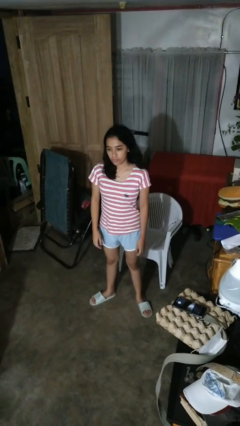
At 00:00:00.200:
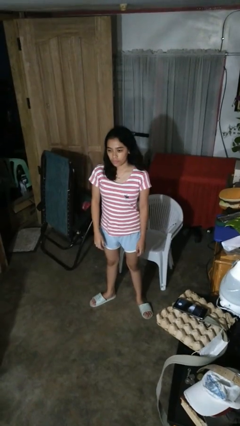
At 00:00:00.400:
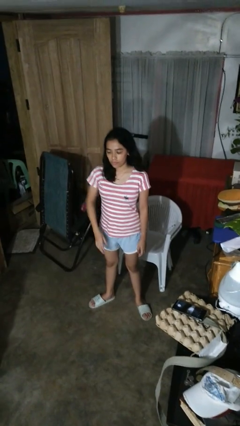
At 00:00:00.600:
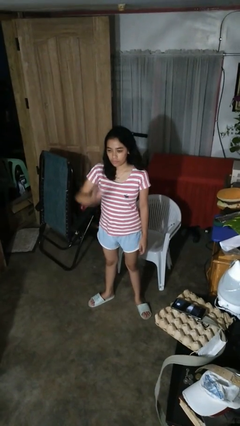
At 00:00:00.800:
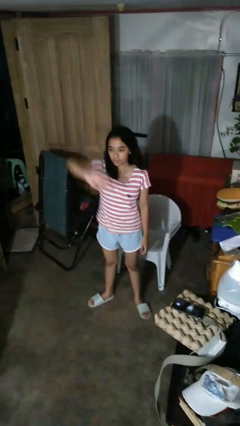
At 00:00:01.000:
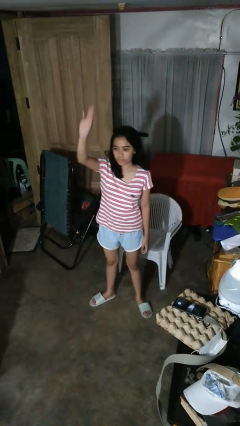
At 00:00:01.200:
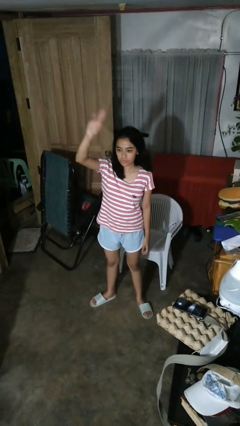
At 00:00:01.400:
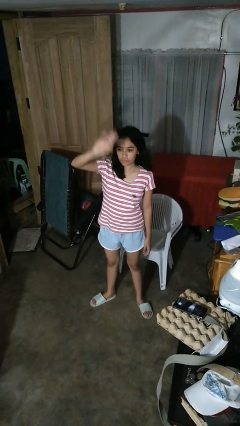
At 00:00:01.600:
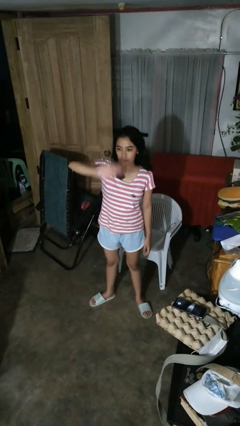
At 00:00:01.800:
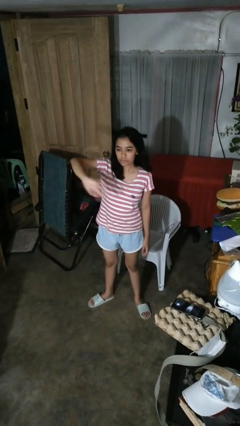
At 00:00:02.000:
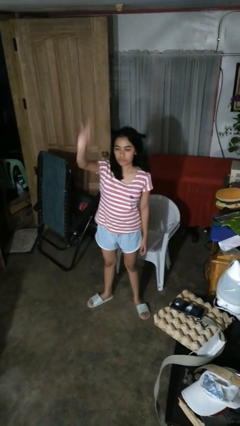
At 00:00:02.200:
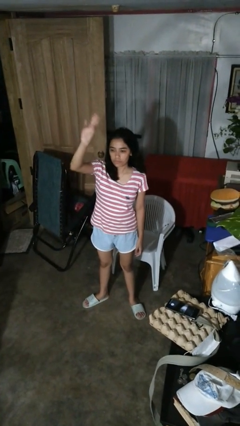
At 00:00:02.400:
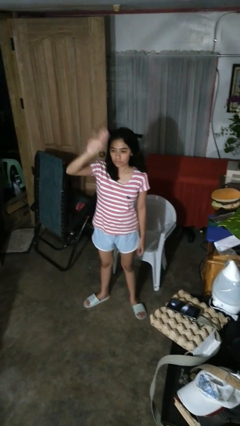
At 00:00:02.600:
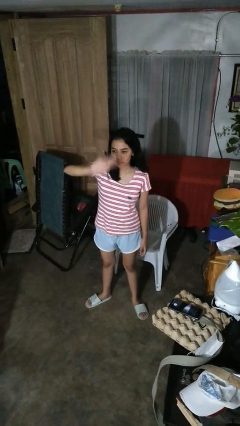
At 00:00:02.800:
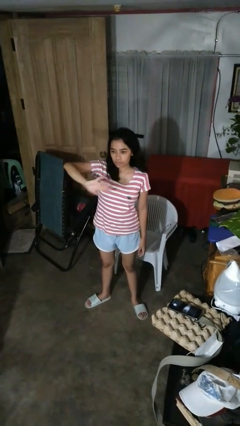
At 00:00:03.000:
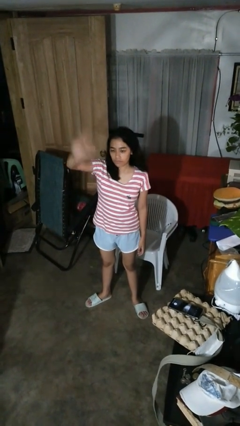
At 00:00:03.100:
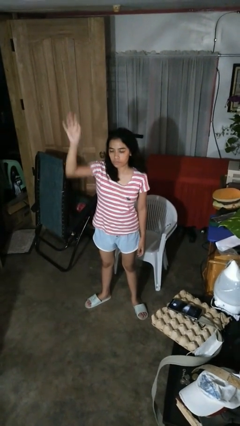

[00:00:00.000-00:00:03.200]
person gestures swipe up

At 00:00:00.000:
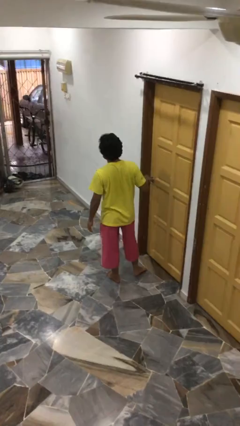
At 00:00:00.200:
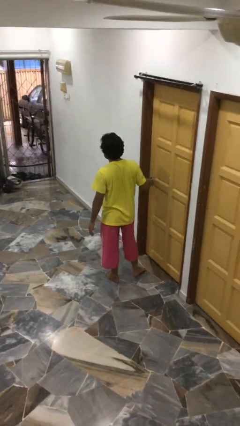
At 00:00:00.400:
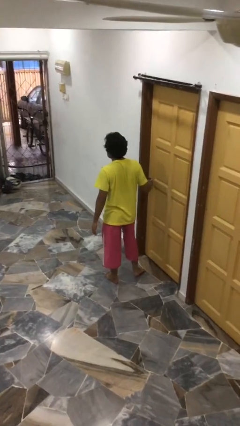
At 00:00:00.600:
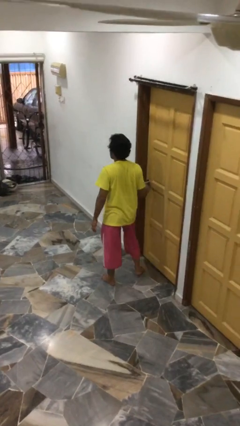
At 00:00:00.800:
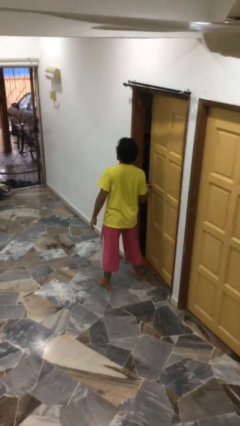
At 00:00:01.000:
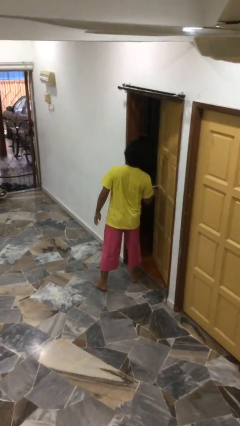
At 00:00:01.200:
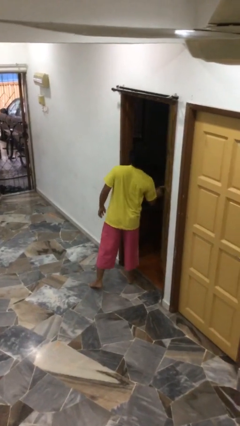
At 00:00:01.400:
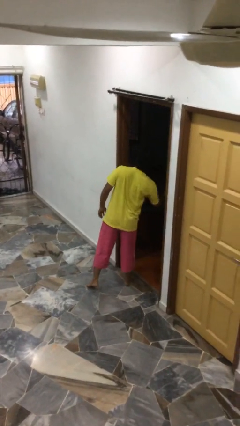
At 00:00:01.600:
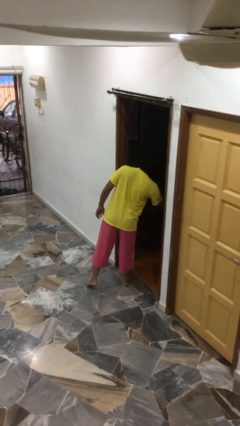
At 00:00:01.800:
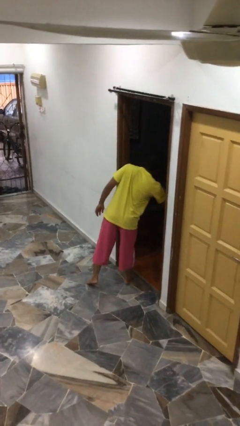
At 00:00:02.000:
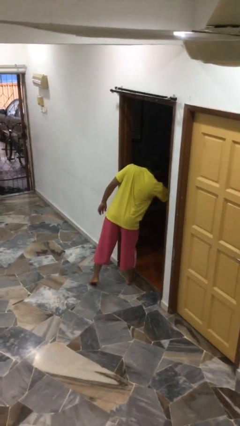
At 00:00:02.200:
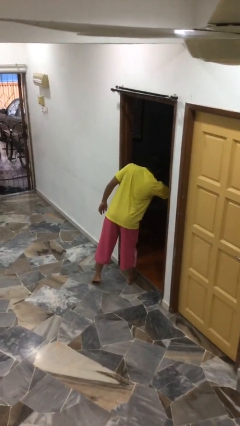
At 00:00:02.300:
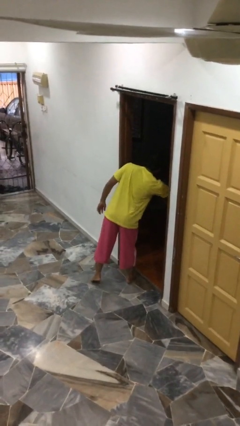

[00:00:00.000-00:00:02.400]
person opens facility door

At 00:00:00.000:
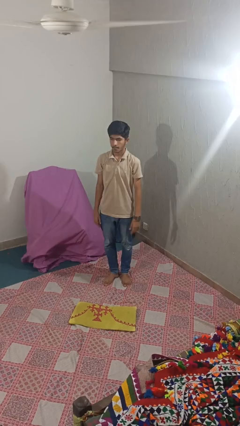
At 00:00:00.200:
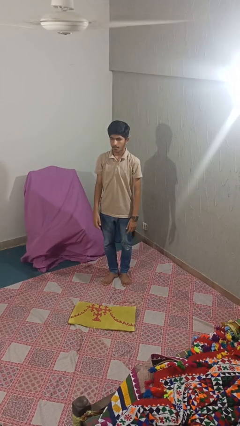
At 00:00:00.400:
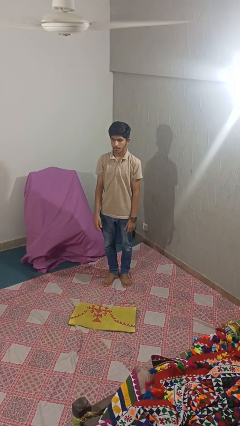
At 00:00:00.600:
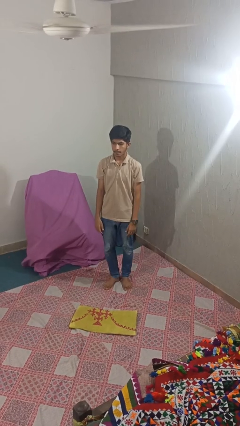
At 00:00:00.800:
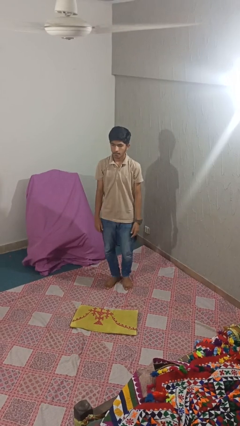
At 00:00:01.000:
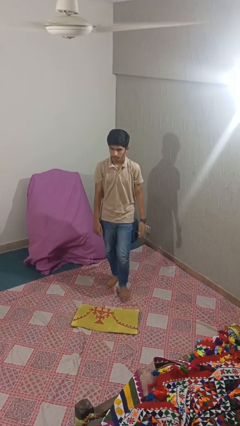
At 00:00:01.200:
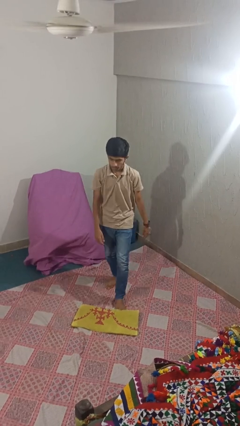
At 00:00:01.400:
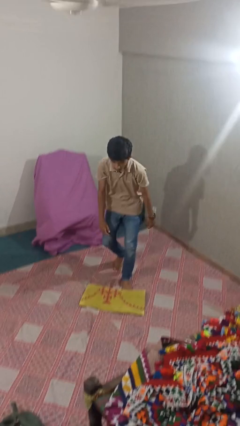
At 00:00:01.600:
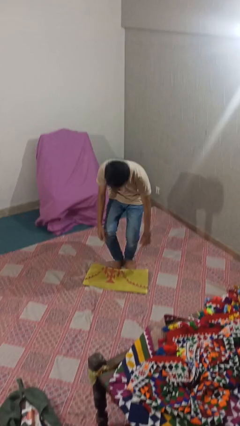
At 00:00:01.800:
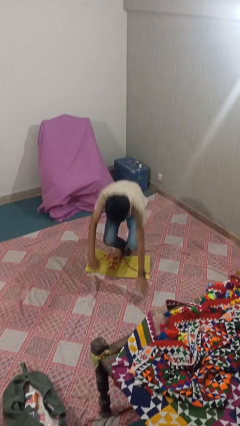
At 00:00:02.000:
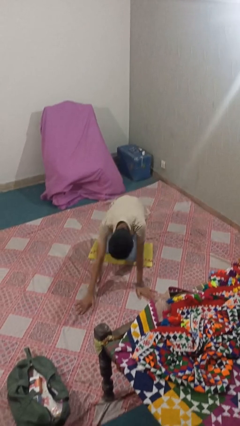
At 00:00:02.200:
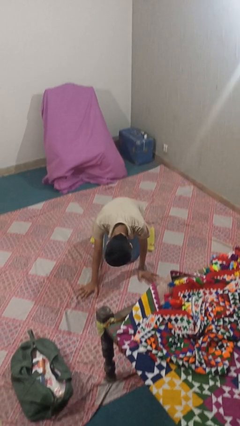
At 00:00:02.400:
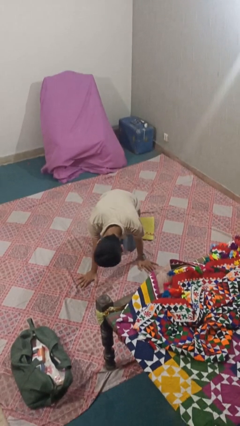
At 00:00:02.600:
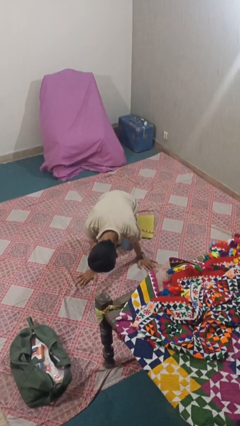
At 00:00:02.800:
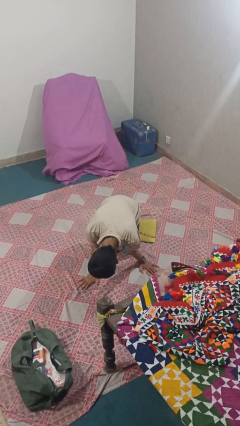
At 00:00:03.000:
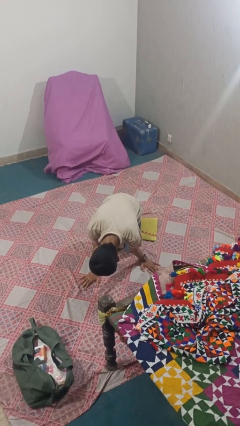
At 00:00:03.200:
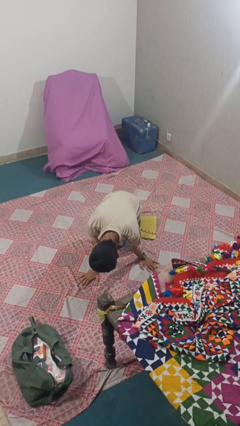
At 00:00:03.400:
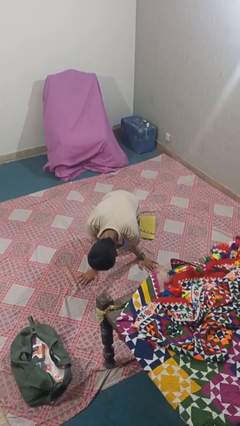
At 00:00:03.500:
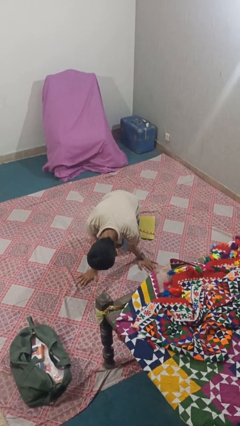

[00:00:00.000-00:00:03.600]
person trips on object on floor

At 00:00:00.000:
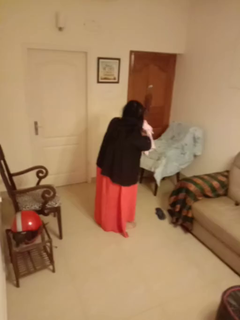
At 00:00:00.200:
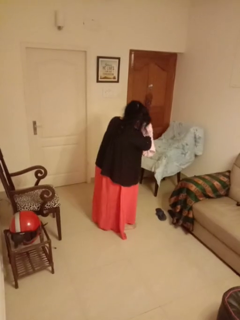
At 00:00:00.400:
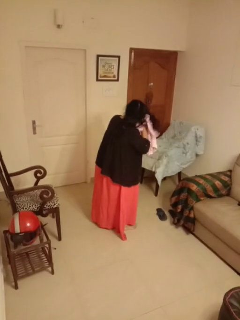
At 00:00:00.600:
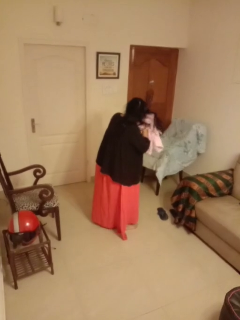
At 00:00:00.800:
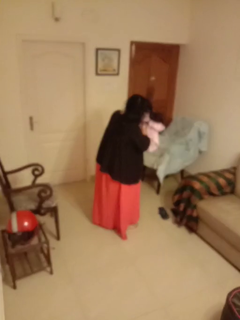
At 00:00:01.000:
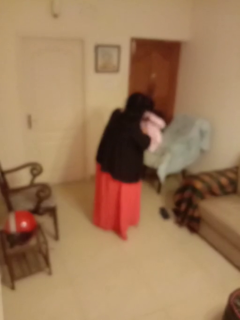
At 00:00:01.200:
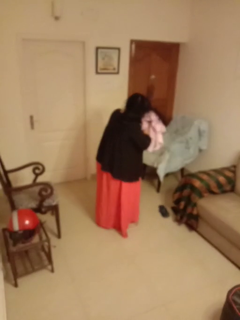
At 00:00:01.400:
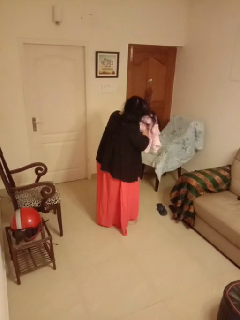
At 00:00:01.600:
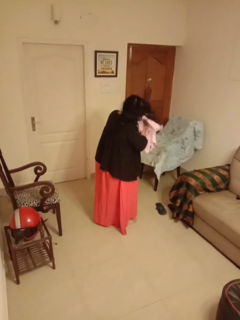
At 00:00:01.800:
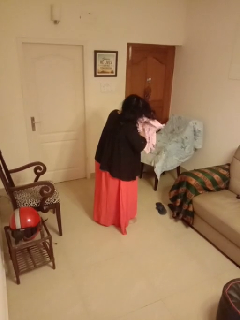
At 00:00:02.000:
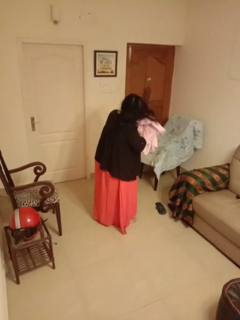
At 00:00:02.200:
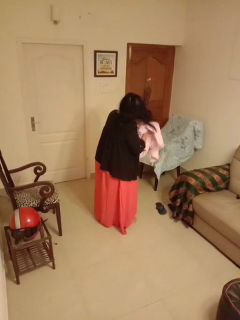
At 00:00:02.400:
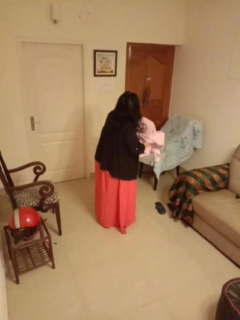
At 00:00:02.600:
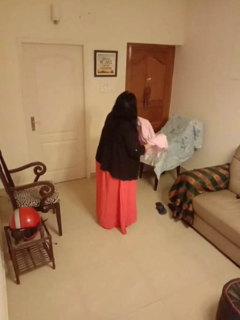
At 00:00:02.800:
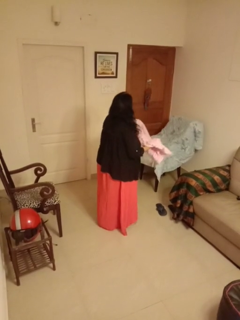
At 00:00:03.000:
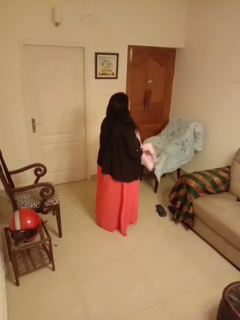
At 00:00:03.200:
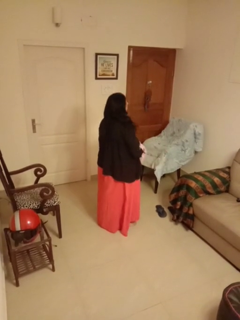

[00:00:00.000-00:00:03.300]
person dries hair with towel

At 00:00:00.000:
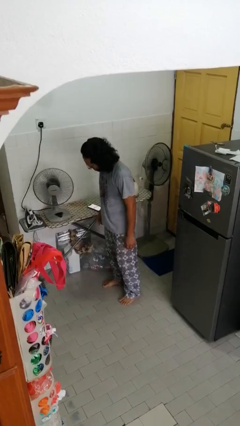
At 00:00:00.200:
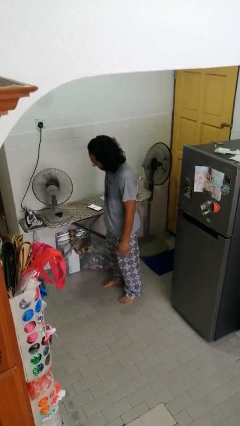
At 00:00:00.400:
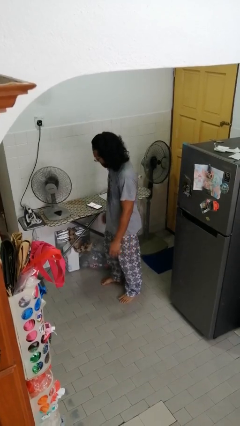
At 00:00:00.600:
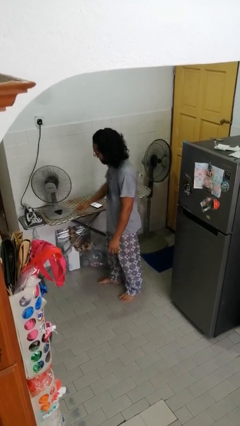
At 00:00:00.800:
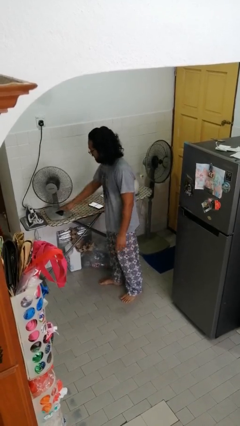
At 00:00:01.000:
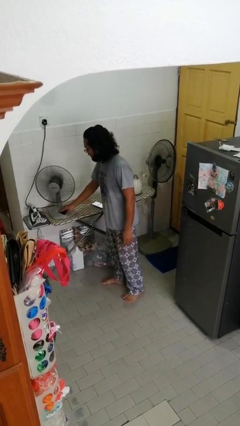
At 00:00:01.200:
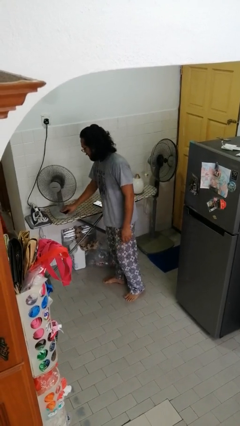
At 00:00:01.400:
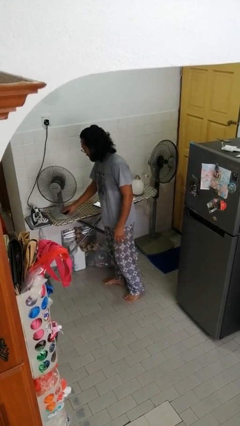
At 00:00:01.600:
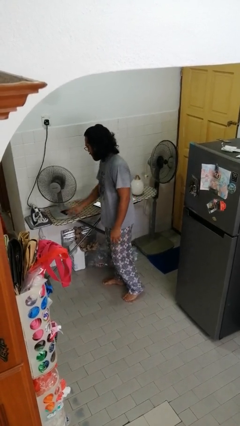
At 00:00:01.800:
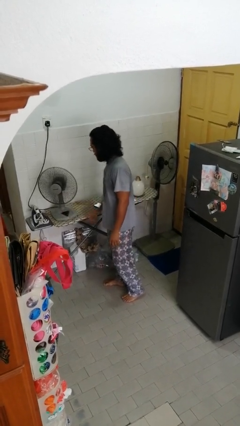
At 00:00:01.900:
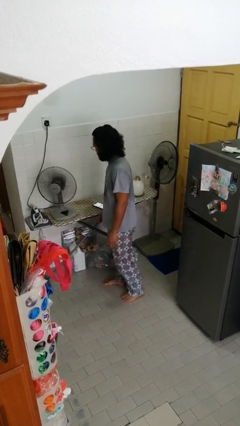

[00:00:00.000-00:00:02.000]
person turns off fan

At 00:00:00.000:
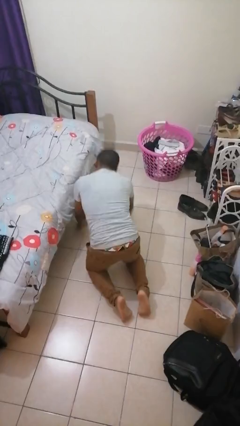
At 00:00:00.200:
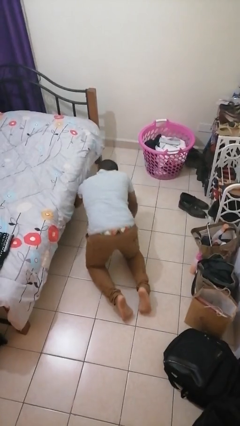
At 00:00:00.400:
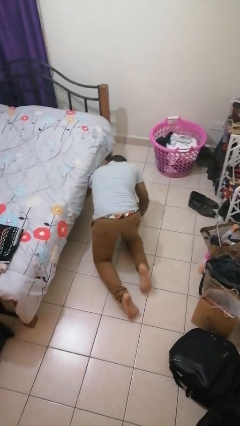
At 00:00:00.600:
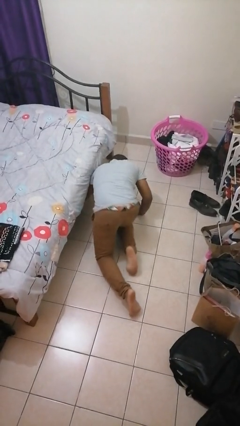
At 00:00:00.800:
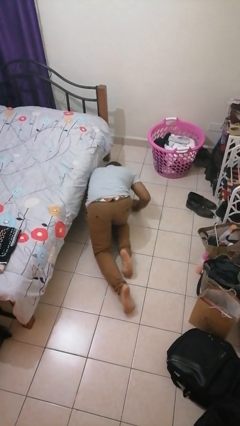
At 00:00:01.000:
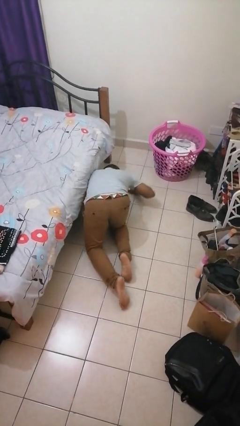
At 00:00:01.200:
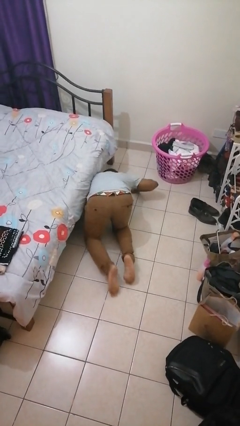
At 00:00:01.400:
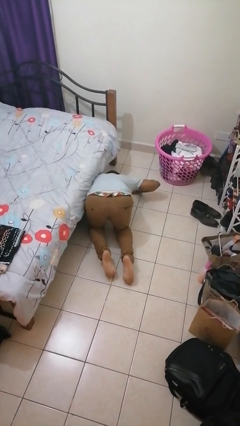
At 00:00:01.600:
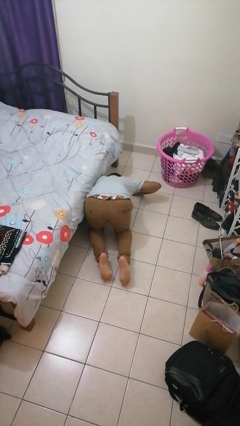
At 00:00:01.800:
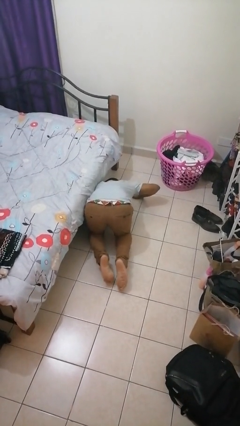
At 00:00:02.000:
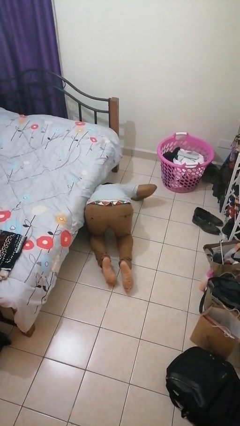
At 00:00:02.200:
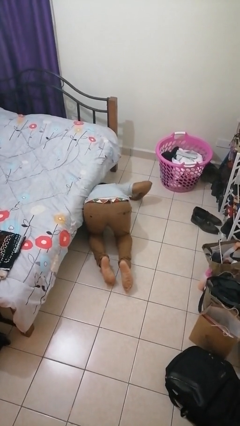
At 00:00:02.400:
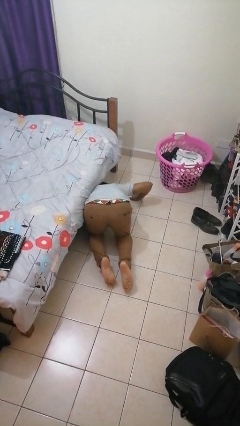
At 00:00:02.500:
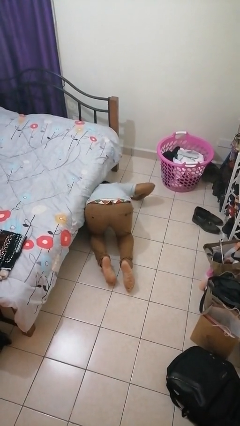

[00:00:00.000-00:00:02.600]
person searches under bed

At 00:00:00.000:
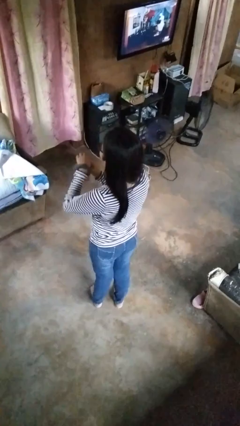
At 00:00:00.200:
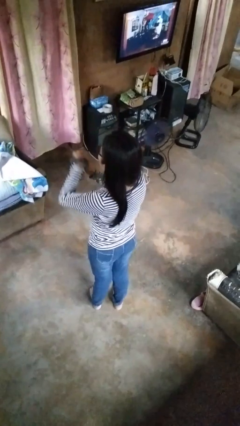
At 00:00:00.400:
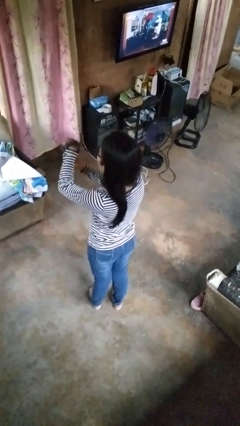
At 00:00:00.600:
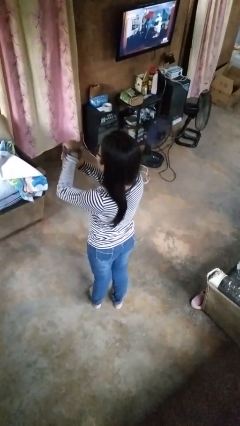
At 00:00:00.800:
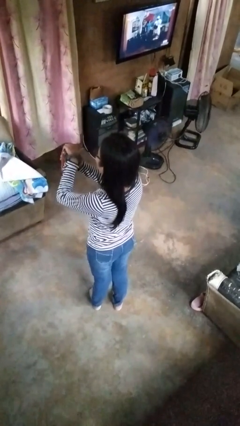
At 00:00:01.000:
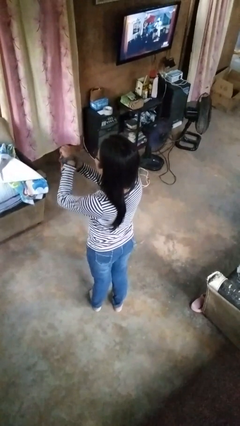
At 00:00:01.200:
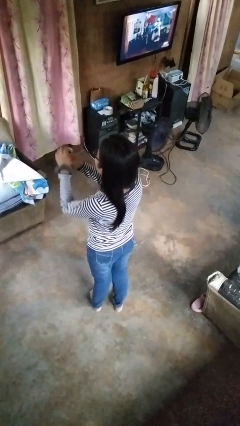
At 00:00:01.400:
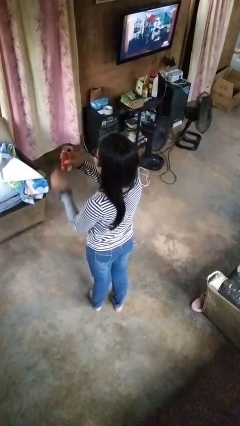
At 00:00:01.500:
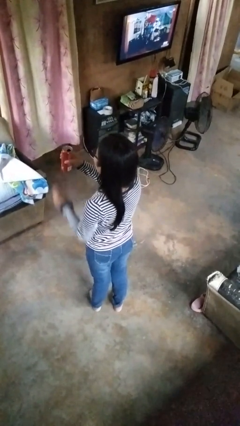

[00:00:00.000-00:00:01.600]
person opens beverage can